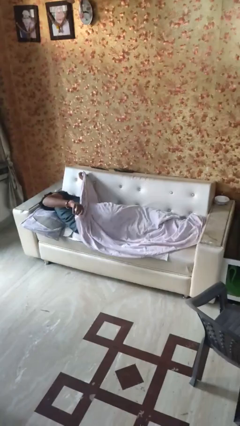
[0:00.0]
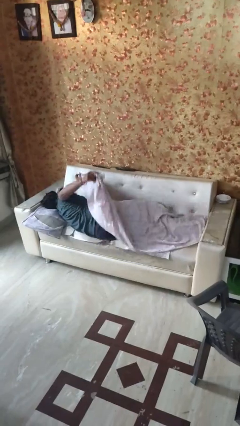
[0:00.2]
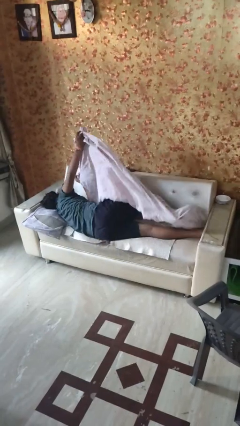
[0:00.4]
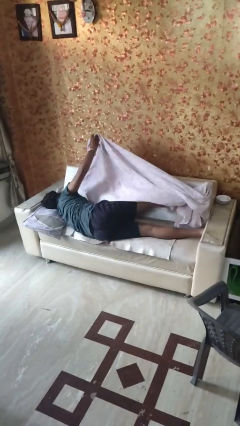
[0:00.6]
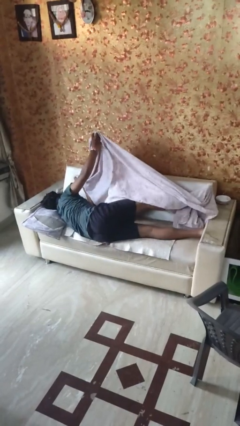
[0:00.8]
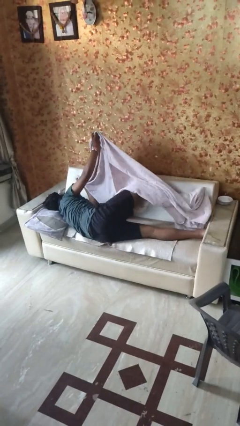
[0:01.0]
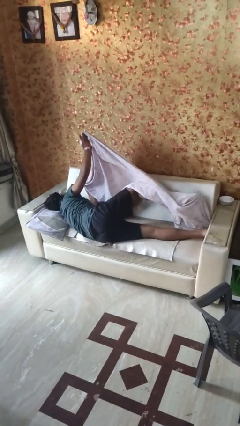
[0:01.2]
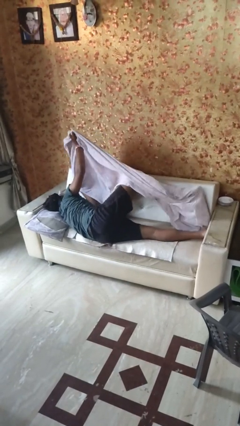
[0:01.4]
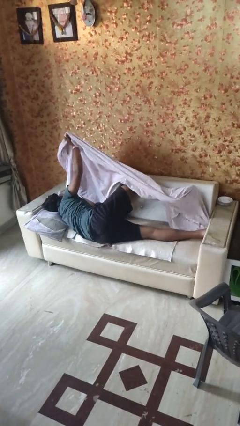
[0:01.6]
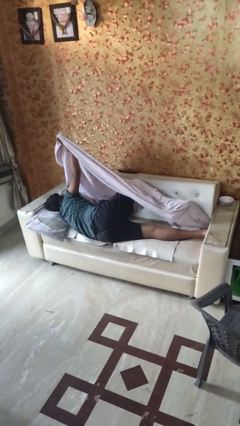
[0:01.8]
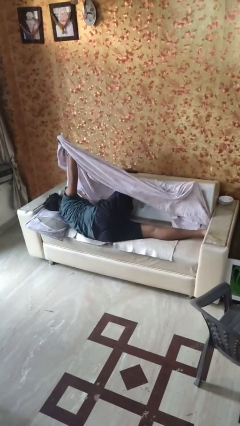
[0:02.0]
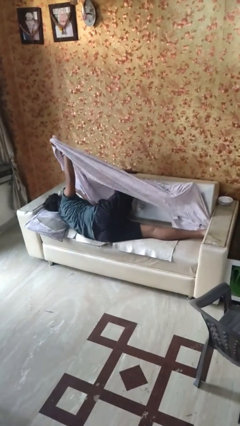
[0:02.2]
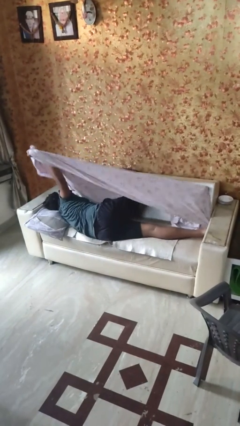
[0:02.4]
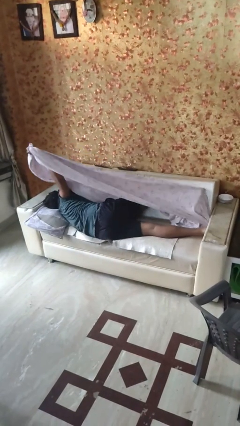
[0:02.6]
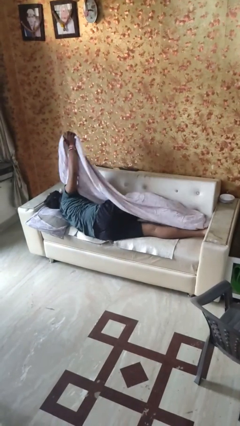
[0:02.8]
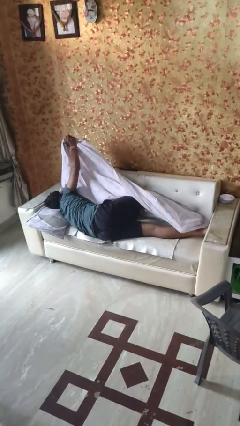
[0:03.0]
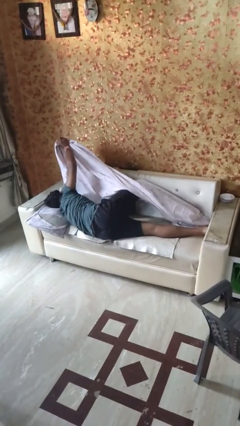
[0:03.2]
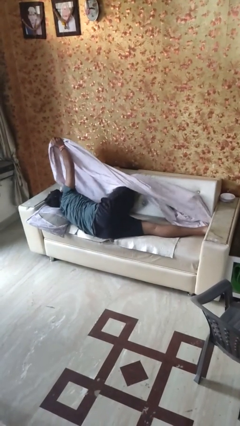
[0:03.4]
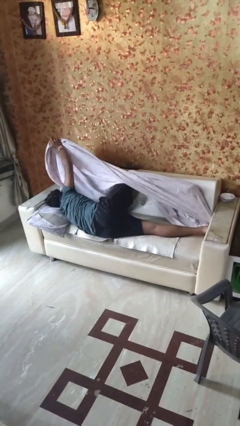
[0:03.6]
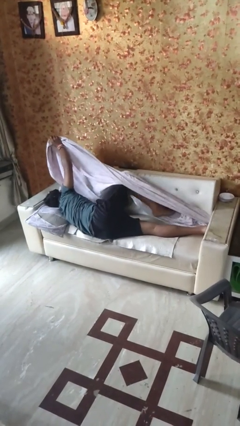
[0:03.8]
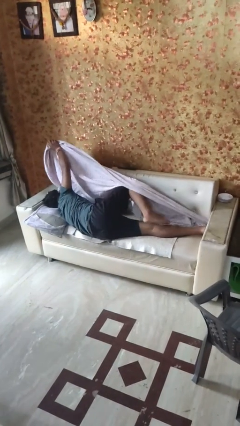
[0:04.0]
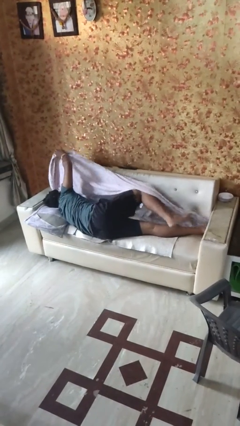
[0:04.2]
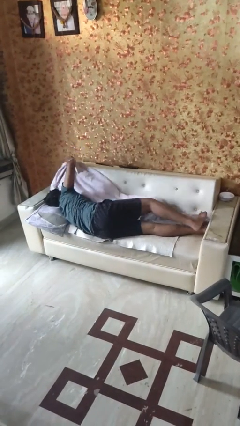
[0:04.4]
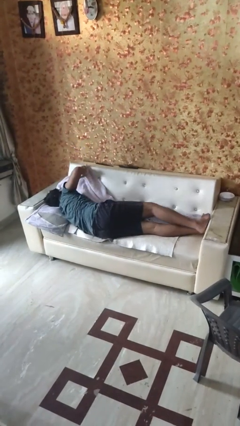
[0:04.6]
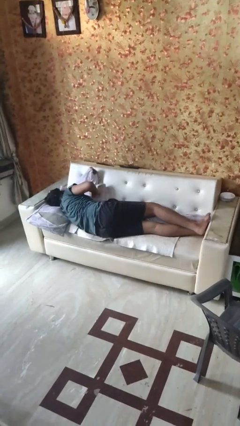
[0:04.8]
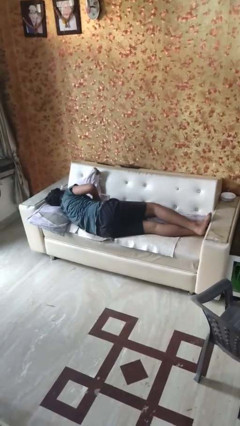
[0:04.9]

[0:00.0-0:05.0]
person uncovers with bedsheets

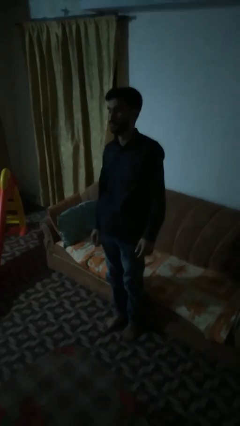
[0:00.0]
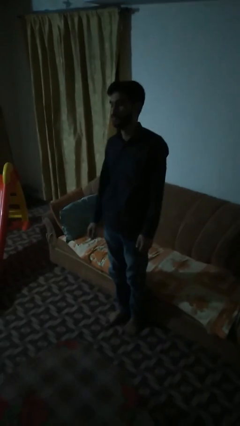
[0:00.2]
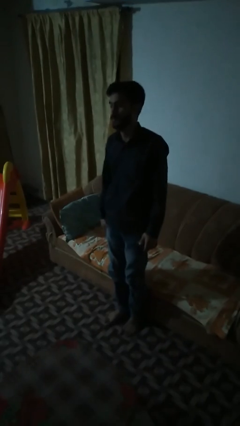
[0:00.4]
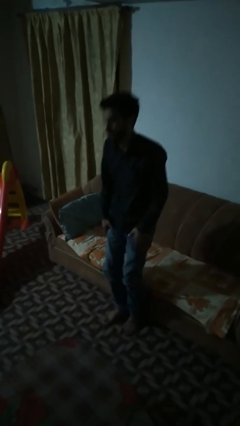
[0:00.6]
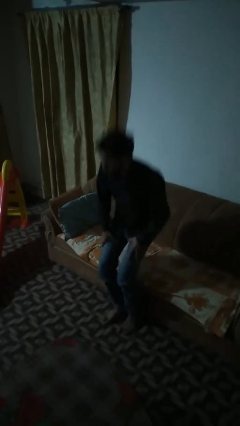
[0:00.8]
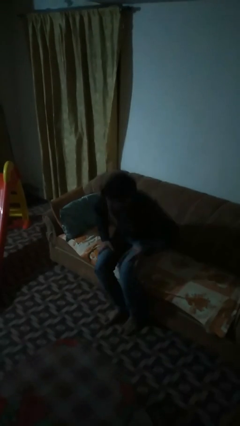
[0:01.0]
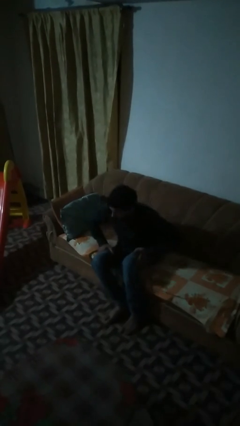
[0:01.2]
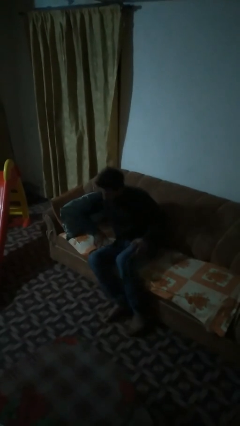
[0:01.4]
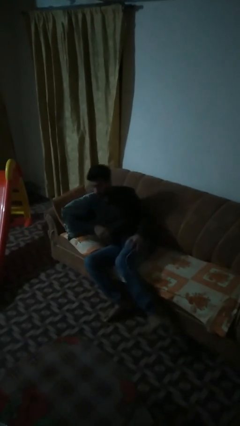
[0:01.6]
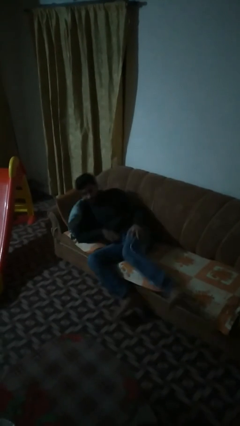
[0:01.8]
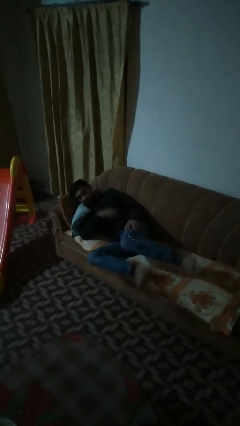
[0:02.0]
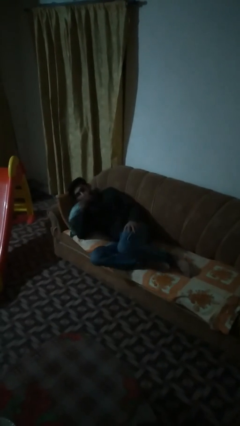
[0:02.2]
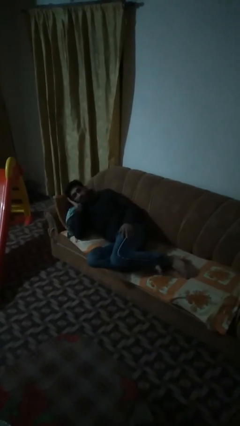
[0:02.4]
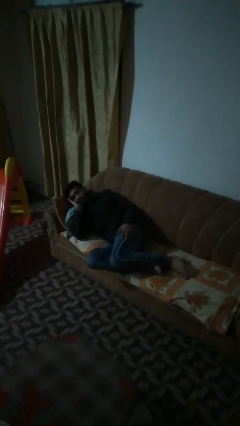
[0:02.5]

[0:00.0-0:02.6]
person lies down on couch

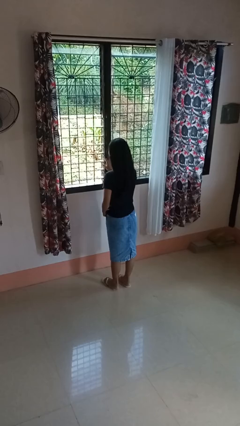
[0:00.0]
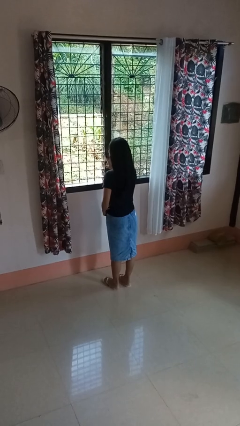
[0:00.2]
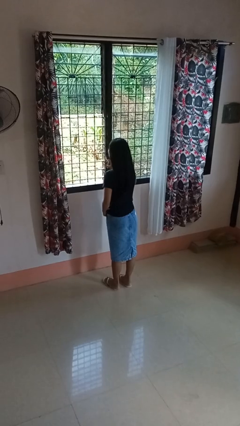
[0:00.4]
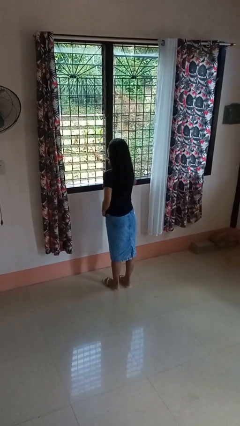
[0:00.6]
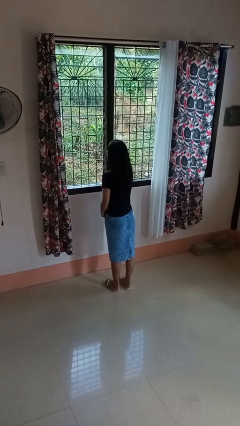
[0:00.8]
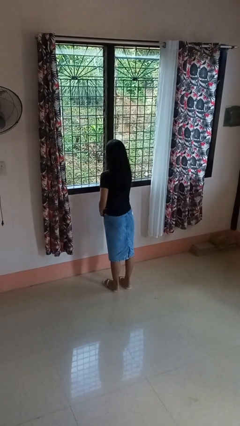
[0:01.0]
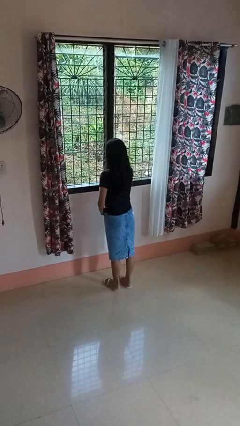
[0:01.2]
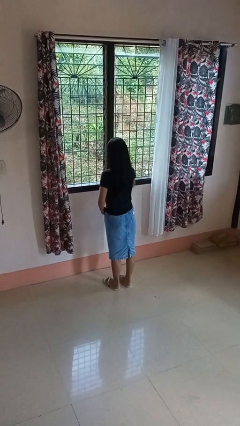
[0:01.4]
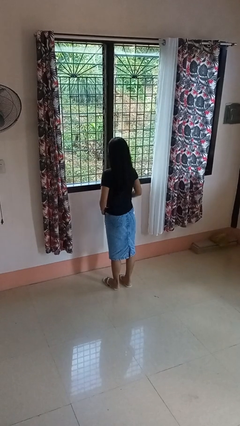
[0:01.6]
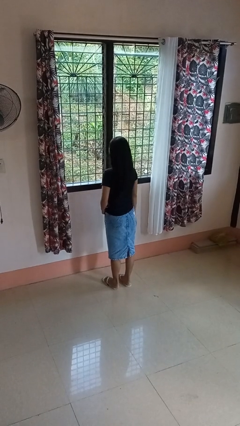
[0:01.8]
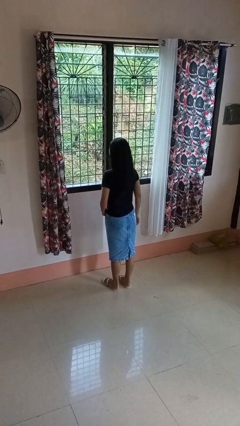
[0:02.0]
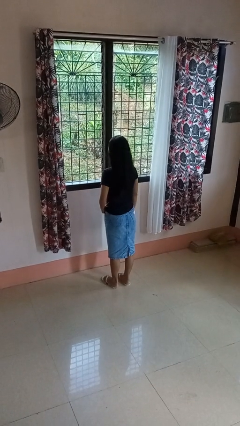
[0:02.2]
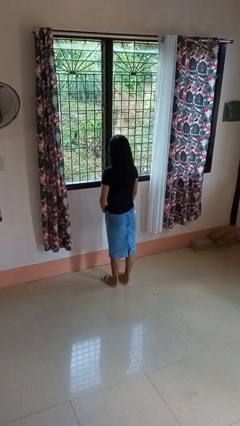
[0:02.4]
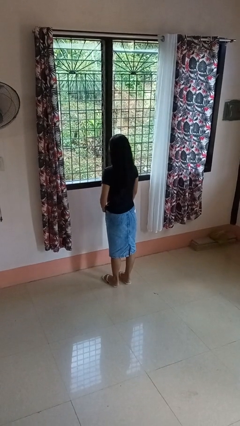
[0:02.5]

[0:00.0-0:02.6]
person closes home window

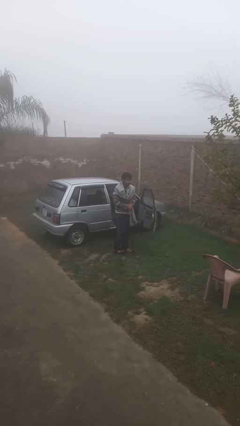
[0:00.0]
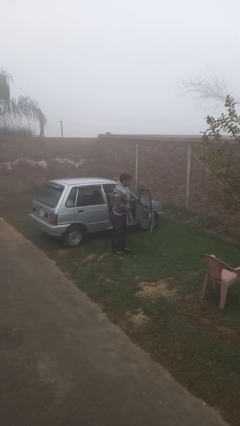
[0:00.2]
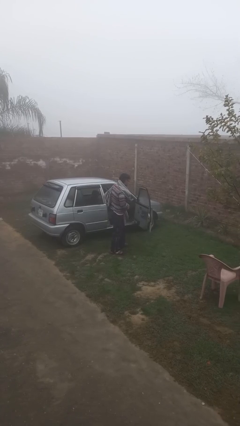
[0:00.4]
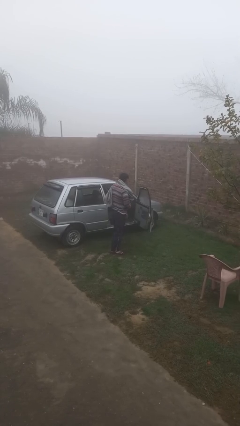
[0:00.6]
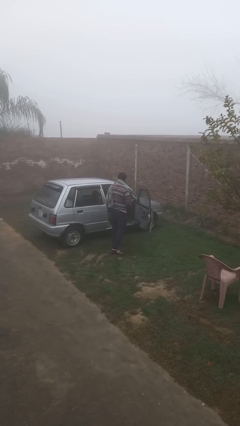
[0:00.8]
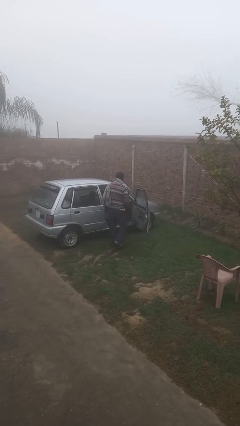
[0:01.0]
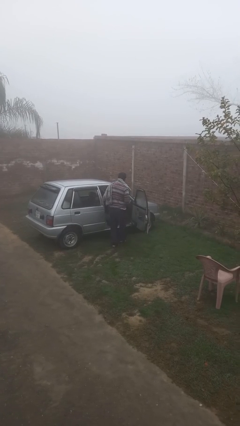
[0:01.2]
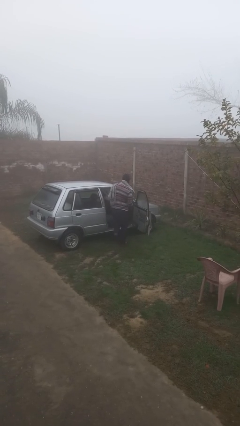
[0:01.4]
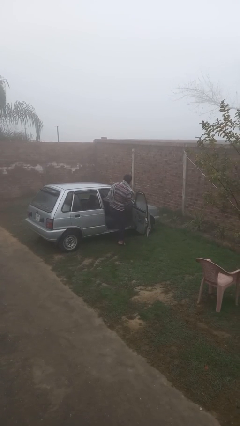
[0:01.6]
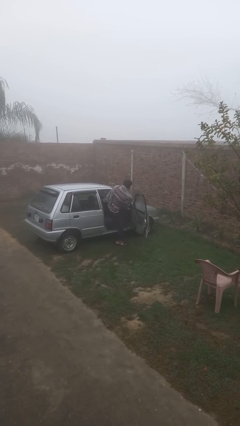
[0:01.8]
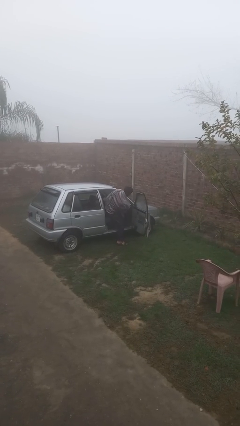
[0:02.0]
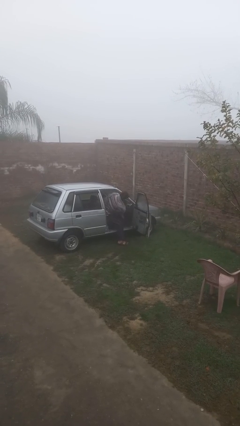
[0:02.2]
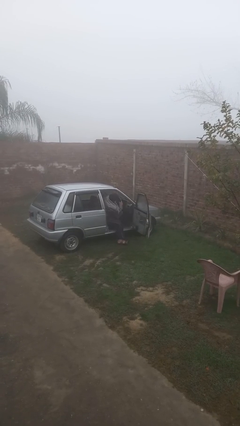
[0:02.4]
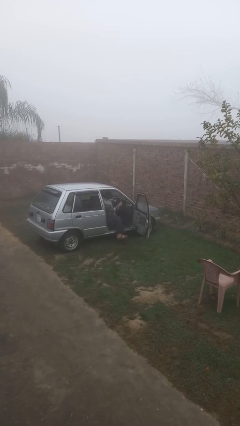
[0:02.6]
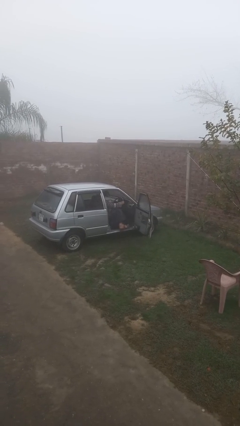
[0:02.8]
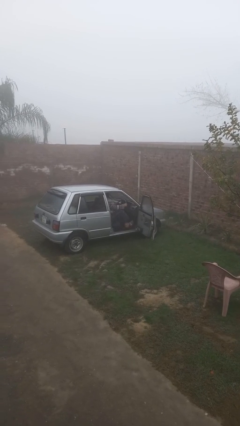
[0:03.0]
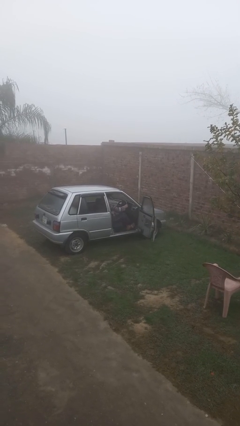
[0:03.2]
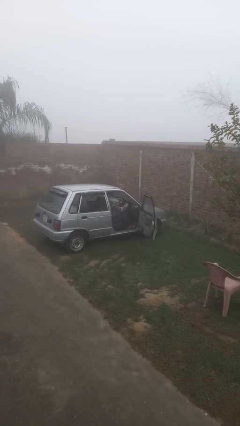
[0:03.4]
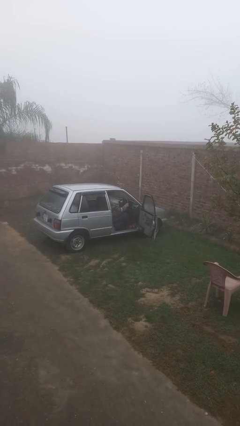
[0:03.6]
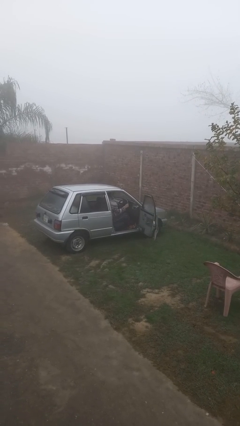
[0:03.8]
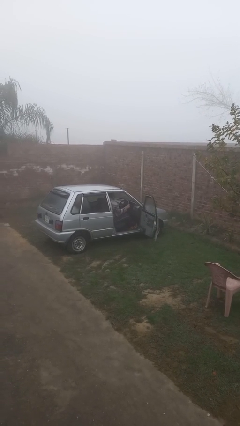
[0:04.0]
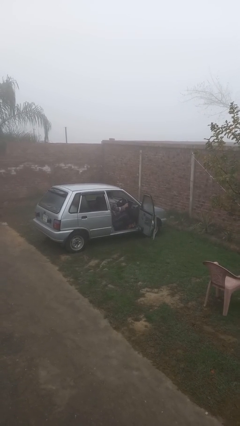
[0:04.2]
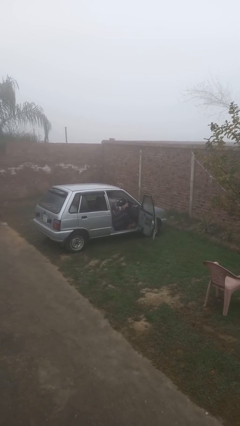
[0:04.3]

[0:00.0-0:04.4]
person enters car

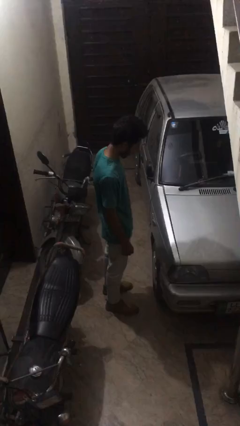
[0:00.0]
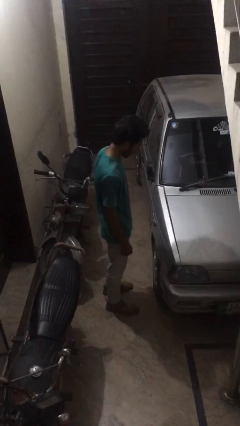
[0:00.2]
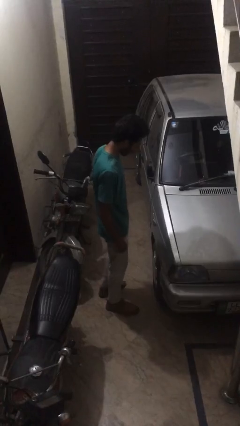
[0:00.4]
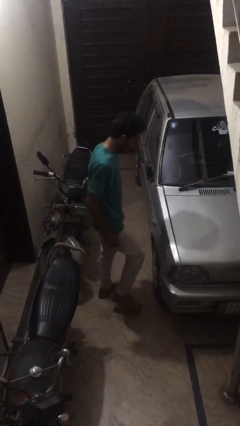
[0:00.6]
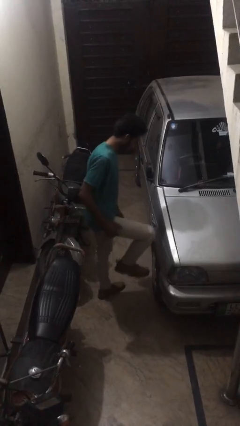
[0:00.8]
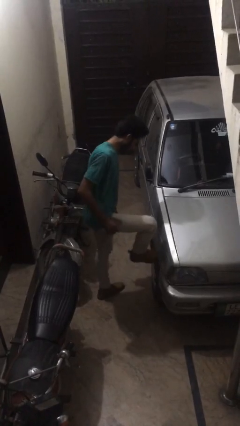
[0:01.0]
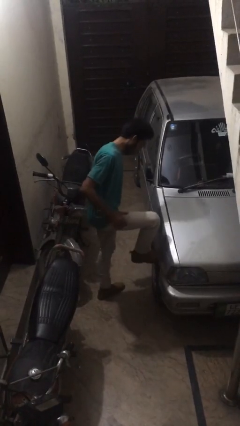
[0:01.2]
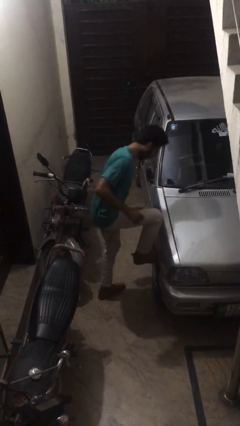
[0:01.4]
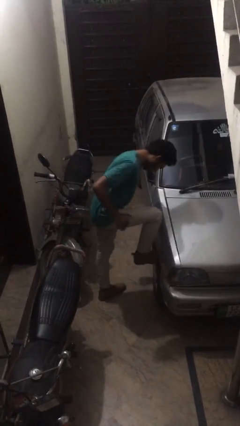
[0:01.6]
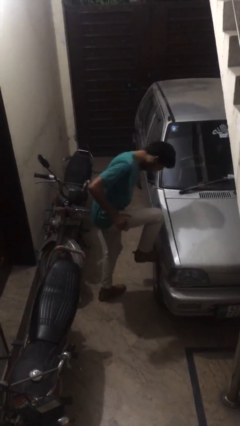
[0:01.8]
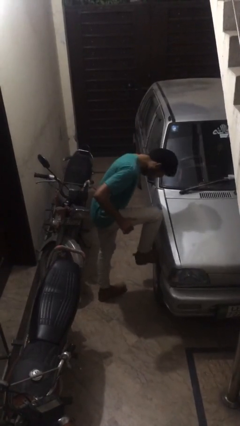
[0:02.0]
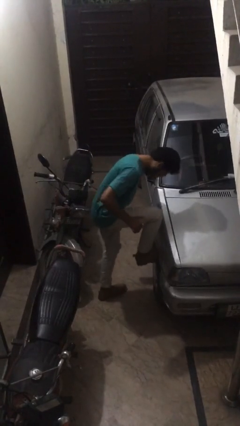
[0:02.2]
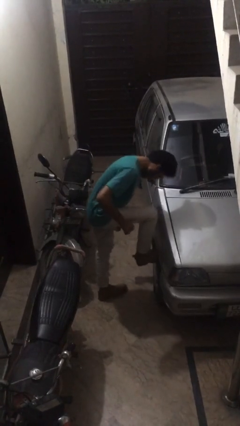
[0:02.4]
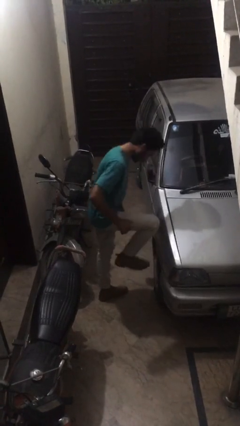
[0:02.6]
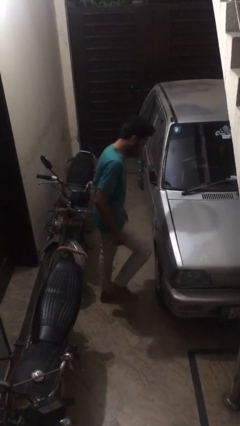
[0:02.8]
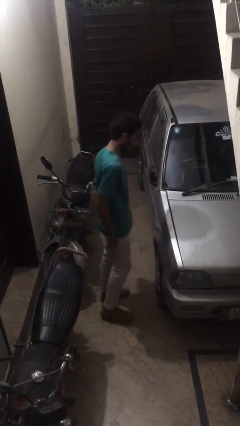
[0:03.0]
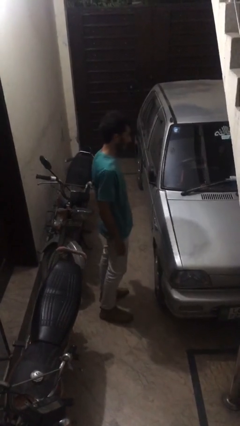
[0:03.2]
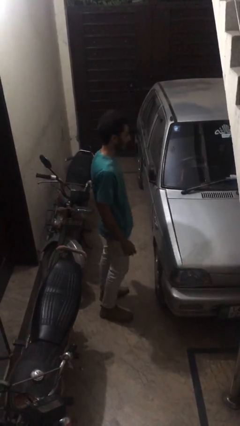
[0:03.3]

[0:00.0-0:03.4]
person kicks car tires
